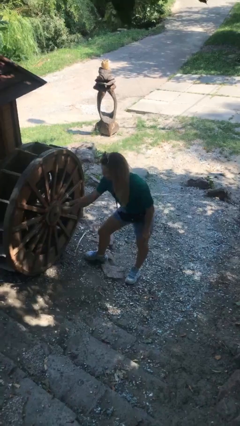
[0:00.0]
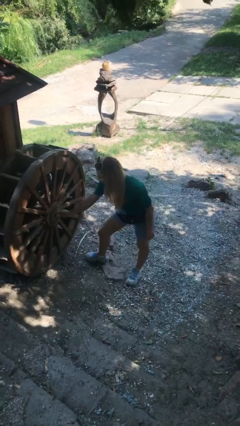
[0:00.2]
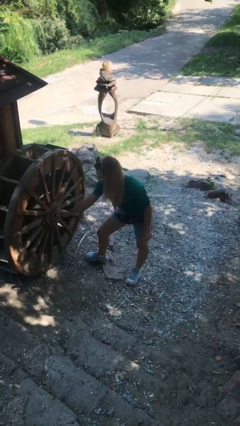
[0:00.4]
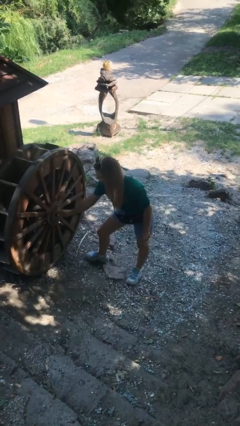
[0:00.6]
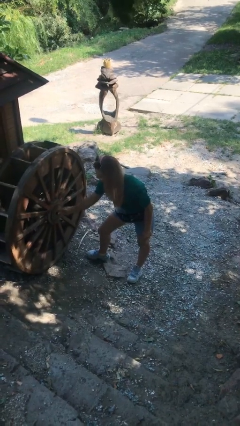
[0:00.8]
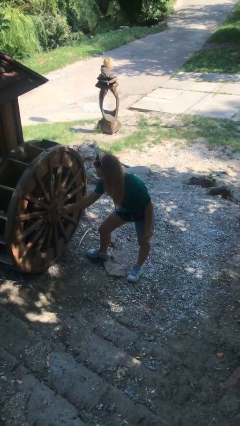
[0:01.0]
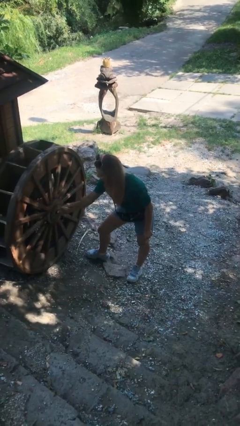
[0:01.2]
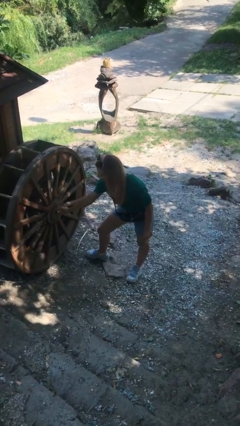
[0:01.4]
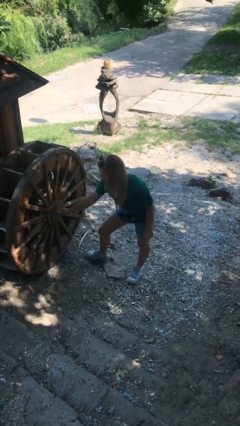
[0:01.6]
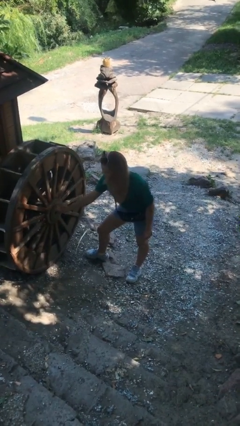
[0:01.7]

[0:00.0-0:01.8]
person taps object with finger

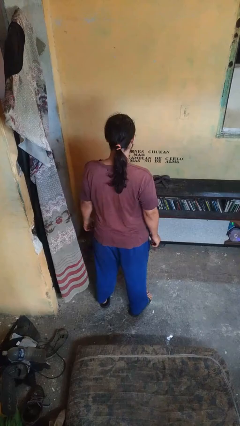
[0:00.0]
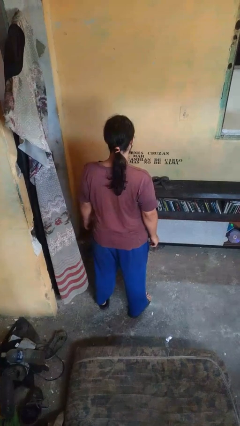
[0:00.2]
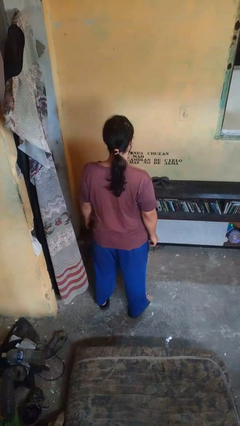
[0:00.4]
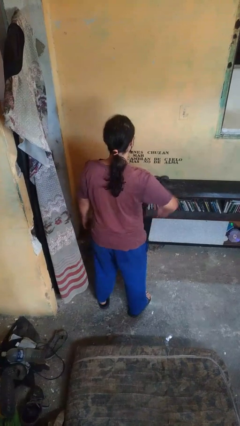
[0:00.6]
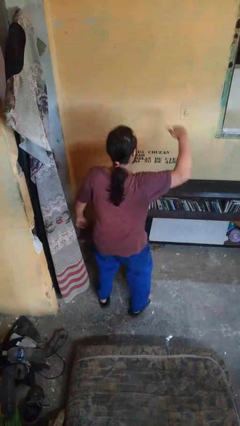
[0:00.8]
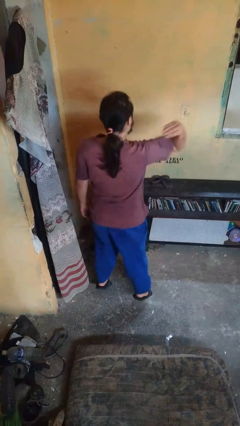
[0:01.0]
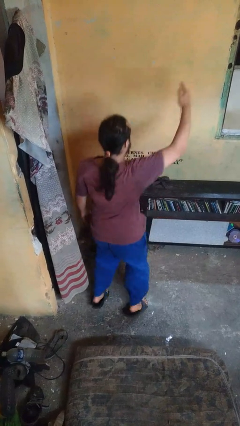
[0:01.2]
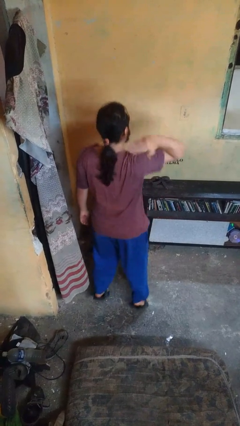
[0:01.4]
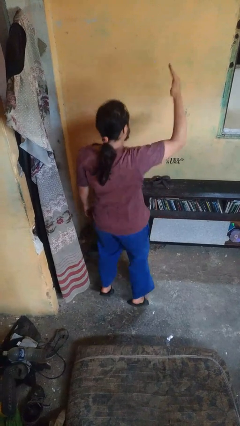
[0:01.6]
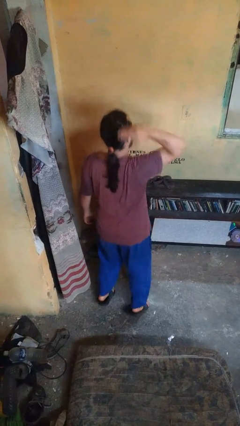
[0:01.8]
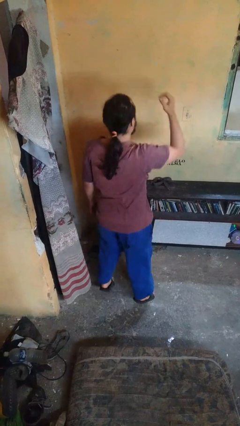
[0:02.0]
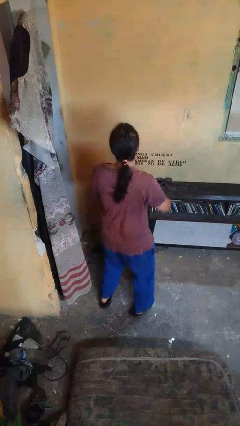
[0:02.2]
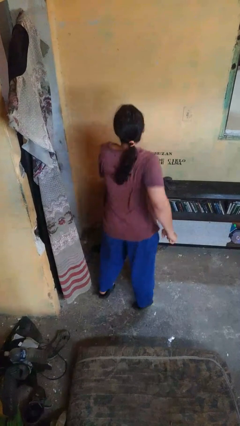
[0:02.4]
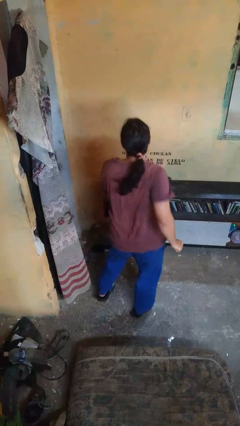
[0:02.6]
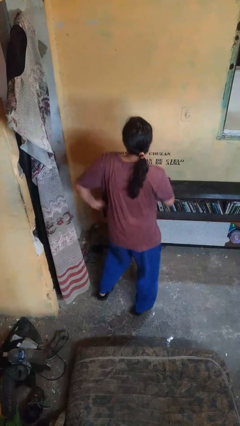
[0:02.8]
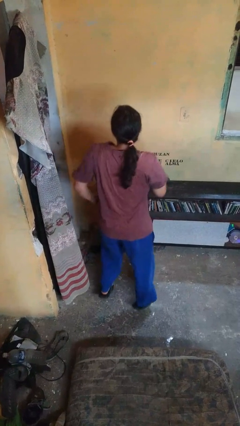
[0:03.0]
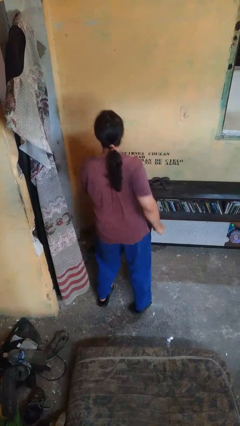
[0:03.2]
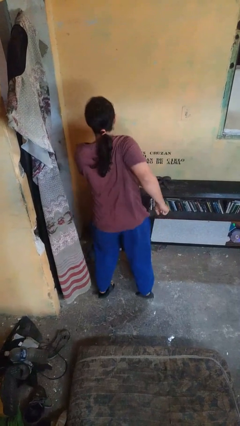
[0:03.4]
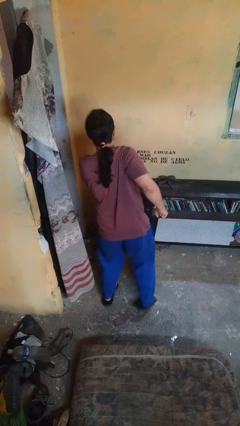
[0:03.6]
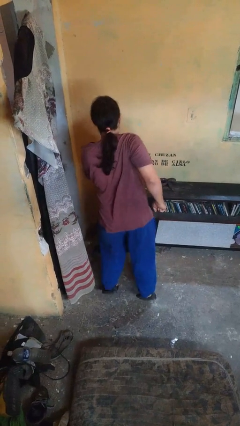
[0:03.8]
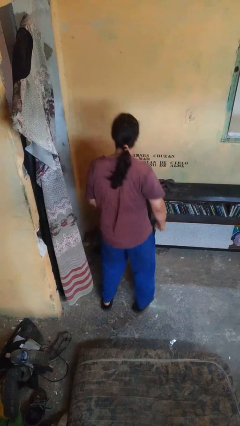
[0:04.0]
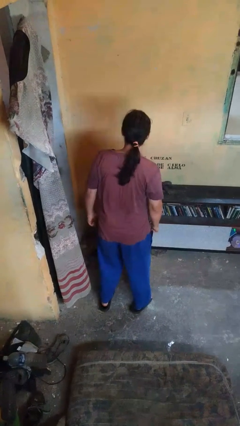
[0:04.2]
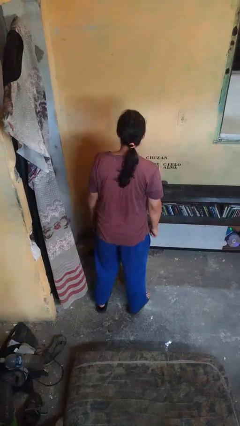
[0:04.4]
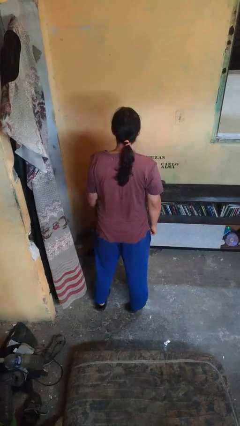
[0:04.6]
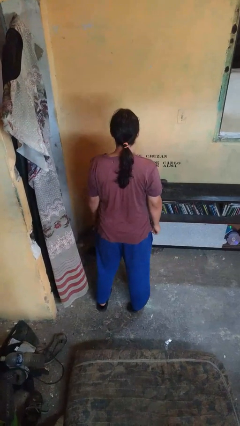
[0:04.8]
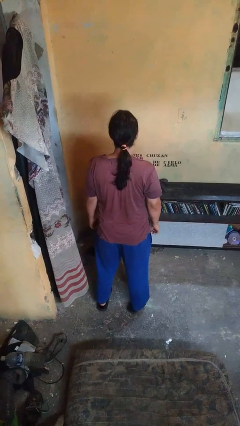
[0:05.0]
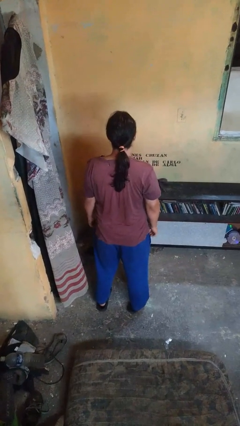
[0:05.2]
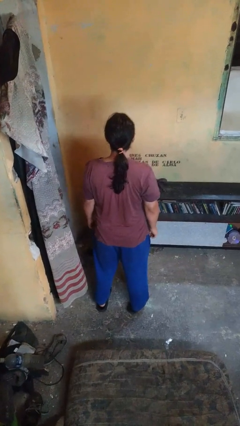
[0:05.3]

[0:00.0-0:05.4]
person dances in place

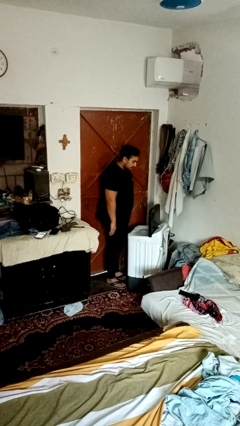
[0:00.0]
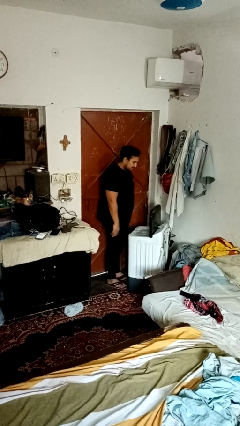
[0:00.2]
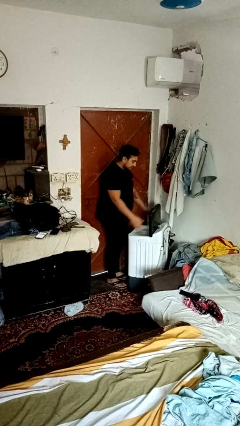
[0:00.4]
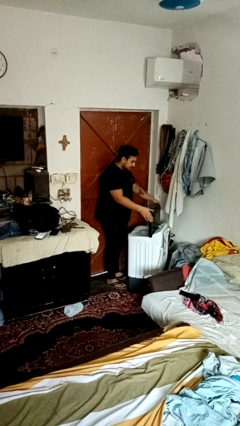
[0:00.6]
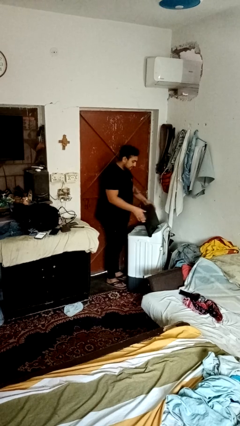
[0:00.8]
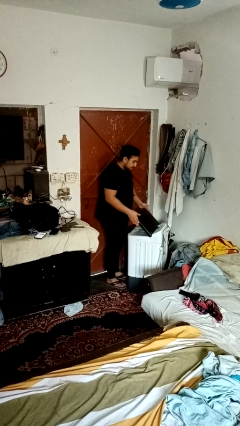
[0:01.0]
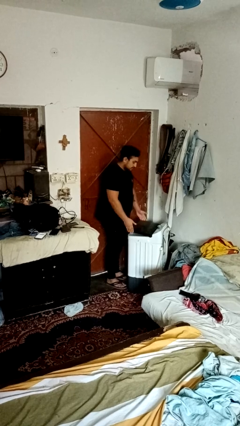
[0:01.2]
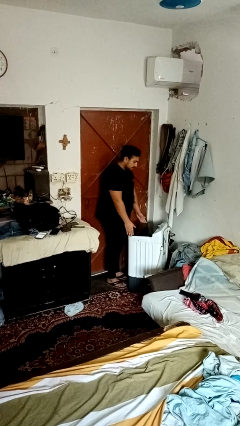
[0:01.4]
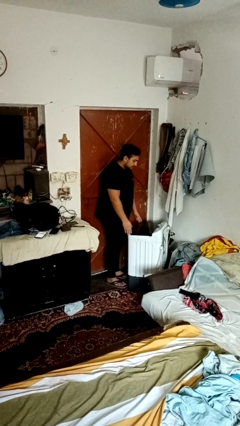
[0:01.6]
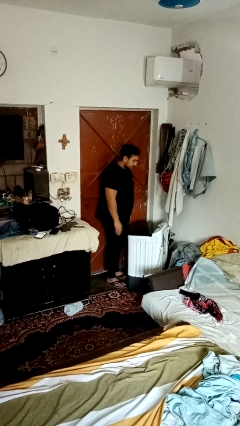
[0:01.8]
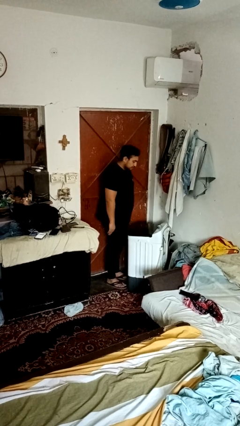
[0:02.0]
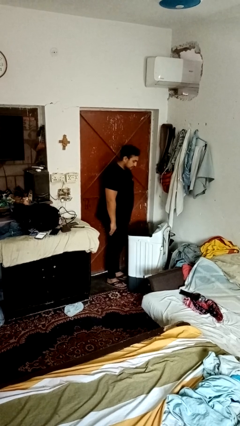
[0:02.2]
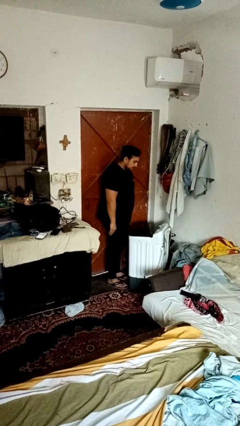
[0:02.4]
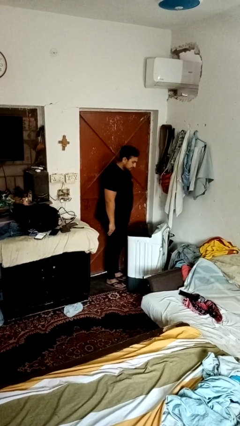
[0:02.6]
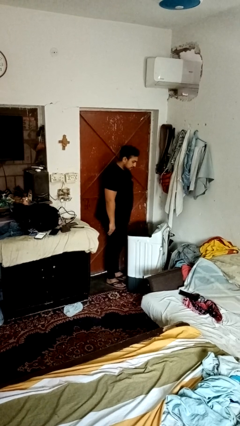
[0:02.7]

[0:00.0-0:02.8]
person closes clothes washer

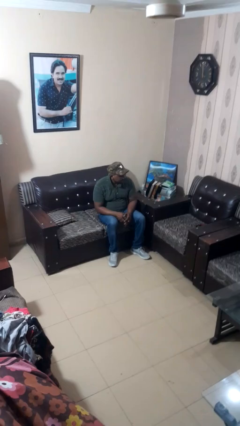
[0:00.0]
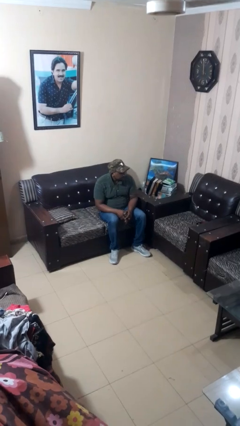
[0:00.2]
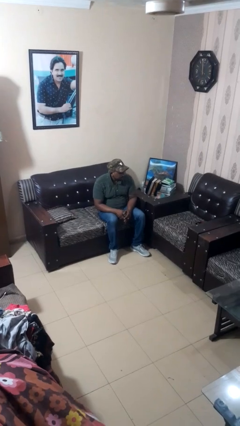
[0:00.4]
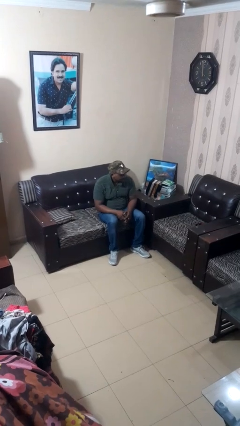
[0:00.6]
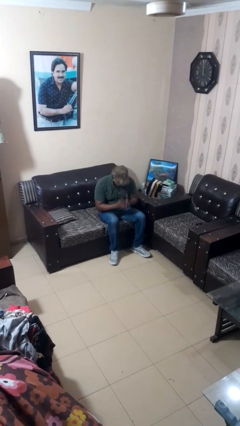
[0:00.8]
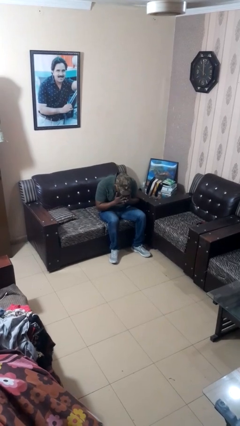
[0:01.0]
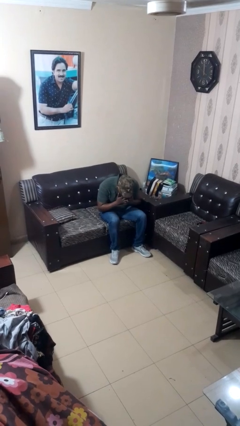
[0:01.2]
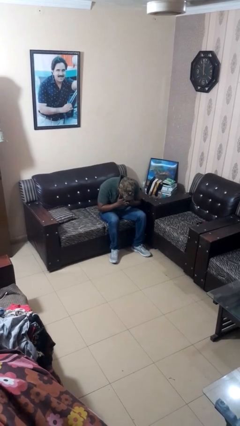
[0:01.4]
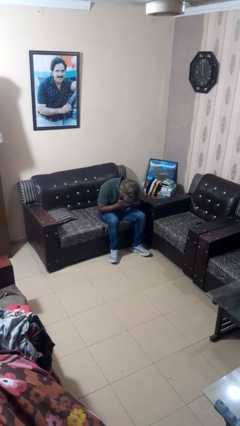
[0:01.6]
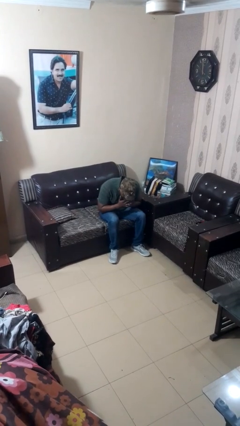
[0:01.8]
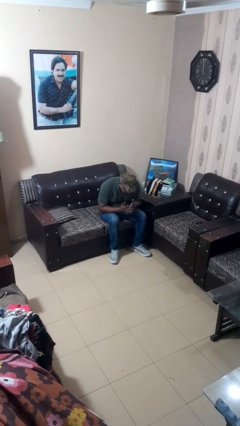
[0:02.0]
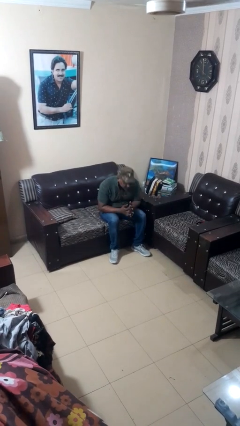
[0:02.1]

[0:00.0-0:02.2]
person sneezes into hand

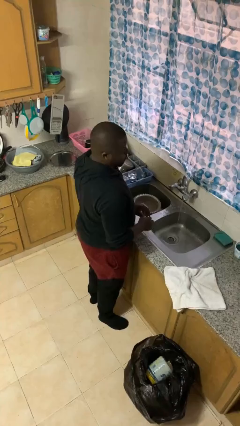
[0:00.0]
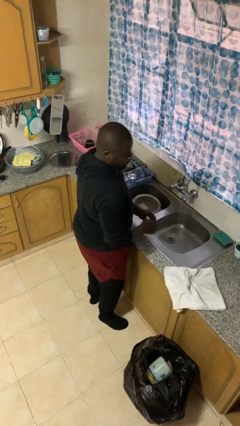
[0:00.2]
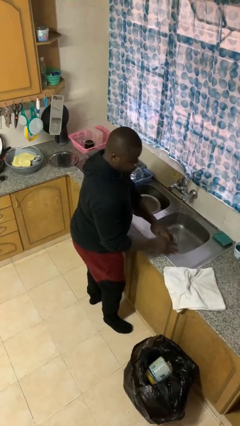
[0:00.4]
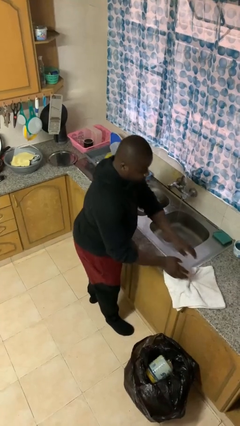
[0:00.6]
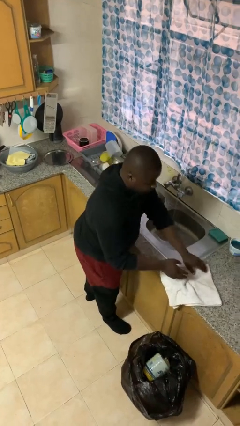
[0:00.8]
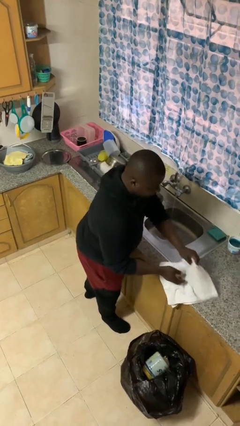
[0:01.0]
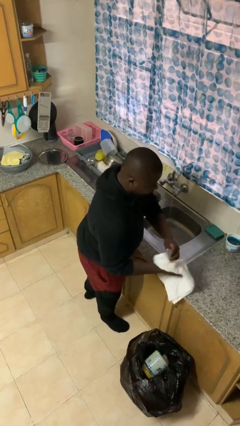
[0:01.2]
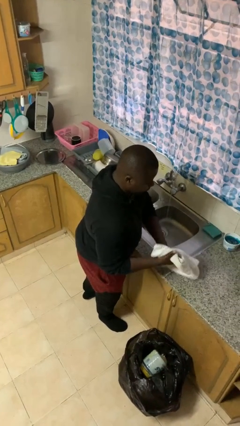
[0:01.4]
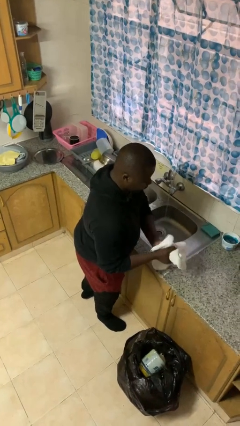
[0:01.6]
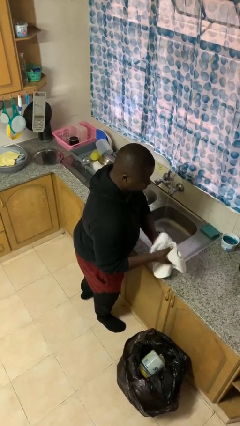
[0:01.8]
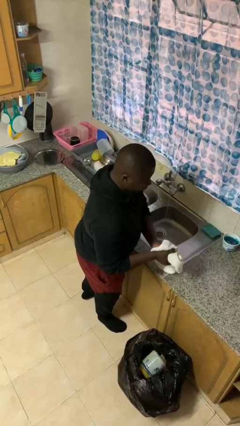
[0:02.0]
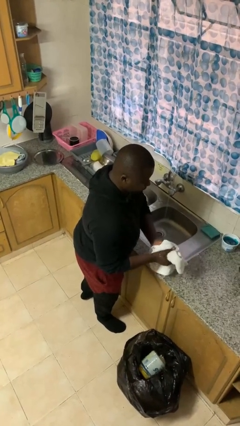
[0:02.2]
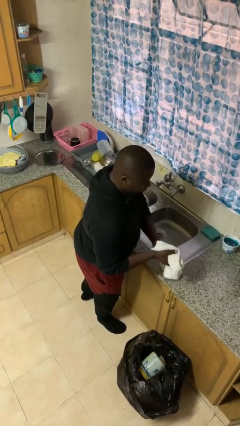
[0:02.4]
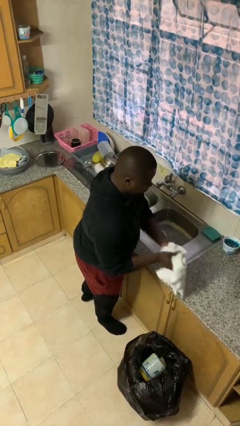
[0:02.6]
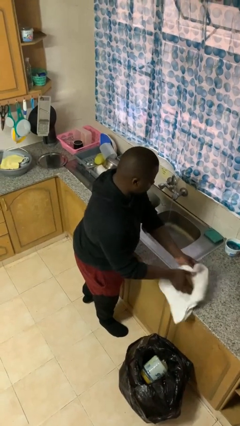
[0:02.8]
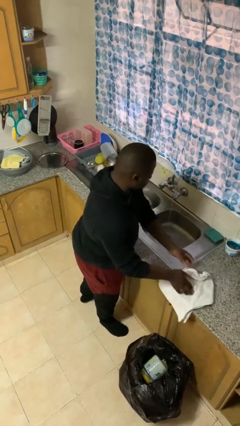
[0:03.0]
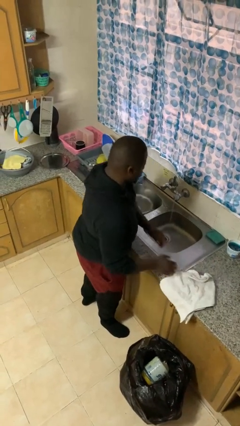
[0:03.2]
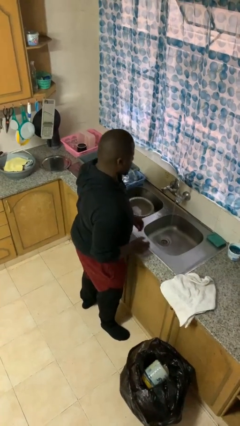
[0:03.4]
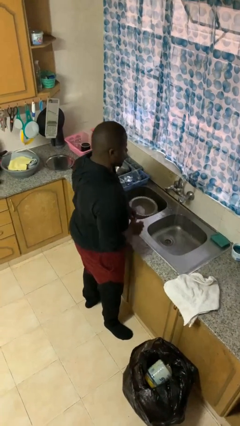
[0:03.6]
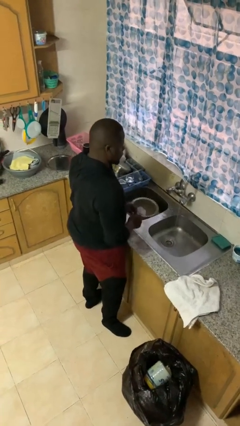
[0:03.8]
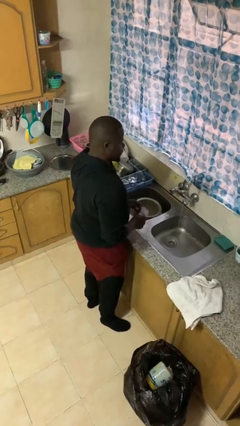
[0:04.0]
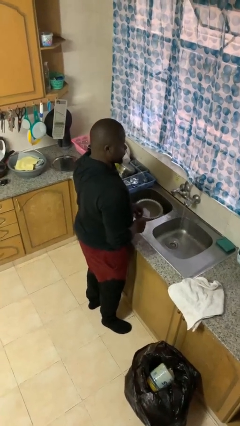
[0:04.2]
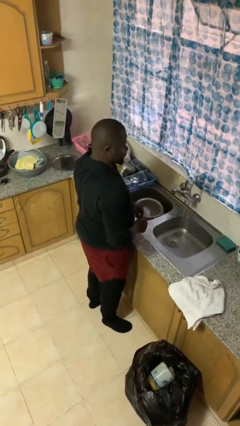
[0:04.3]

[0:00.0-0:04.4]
person dries hands with towel

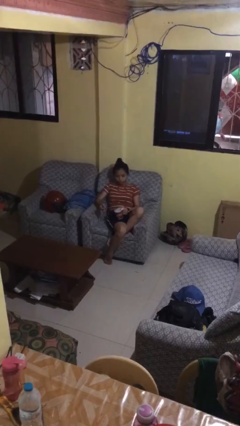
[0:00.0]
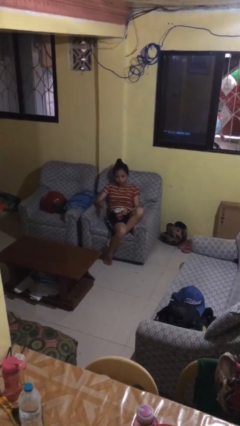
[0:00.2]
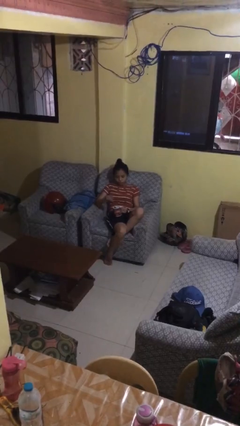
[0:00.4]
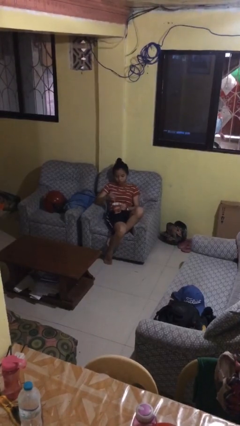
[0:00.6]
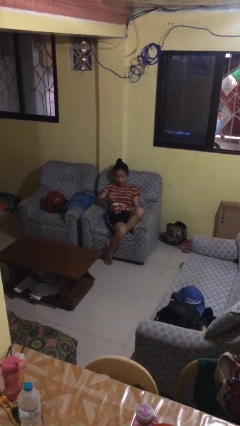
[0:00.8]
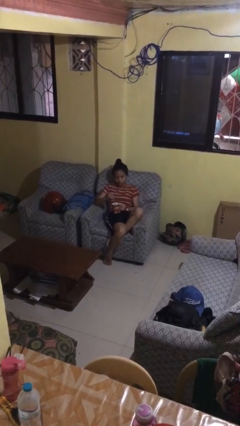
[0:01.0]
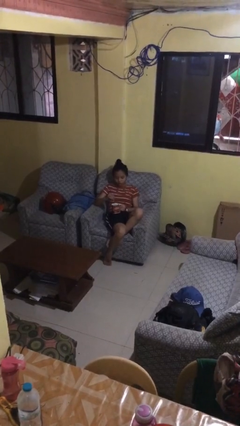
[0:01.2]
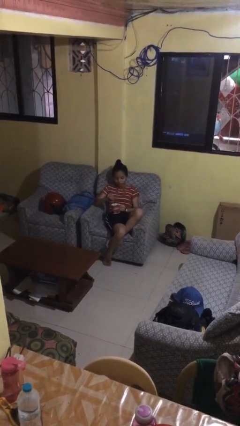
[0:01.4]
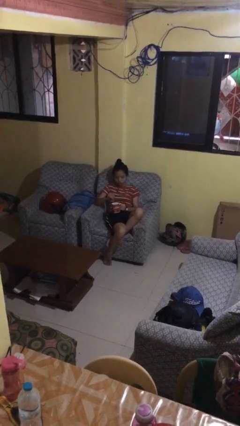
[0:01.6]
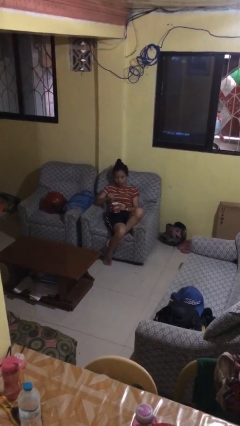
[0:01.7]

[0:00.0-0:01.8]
person stirs mug
